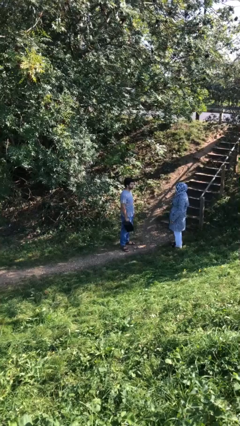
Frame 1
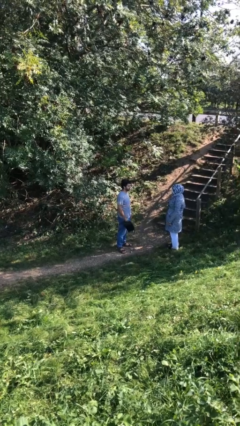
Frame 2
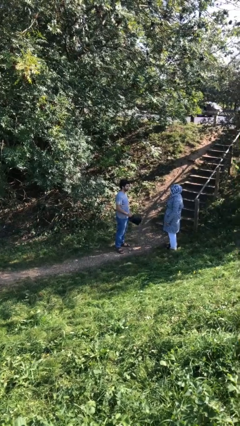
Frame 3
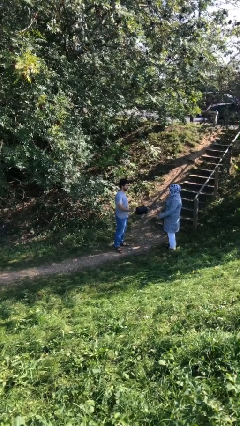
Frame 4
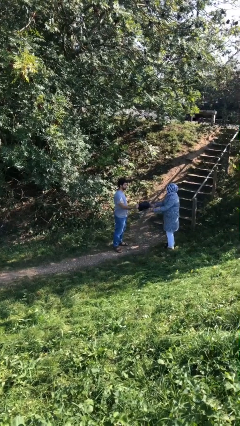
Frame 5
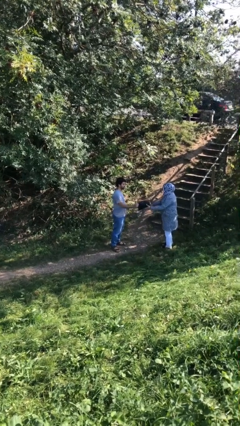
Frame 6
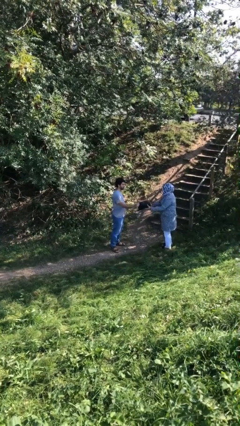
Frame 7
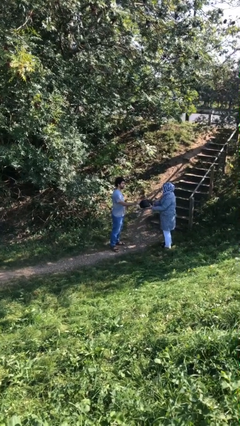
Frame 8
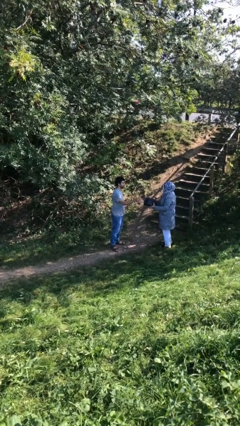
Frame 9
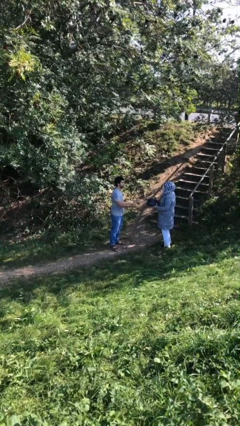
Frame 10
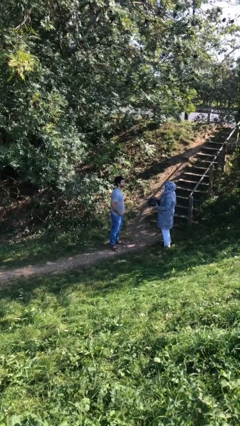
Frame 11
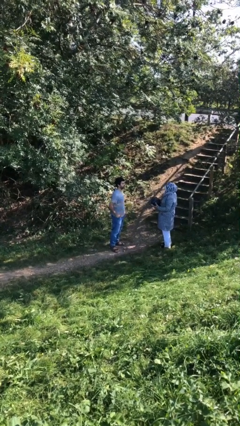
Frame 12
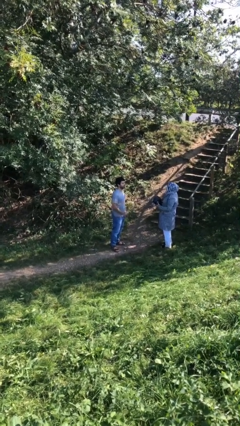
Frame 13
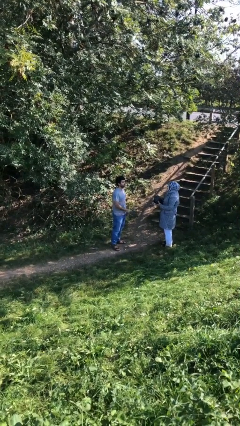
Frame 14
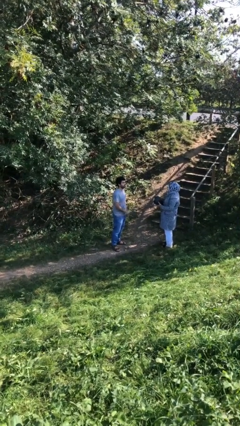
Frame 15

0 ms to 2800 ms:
person transfers object to person

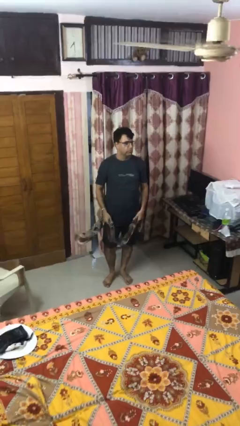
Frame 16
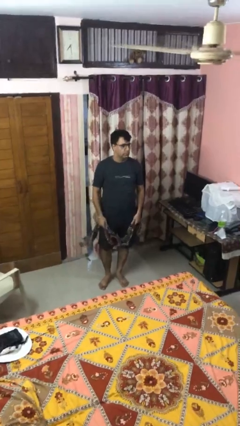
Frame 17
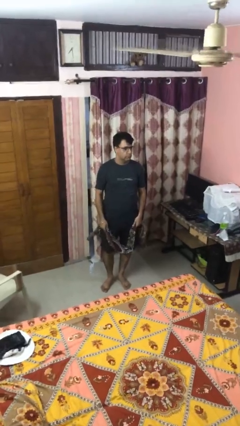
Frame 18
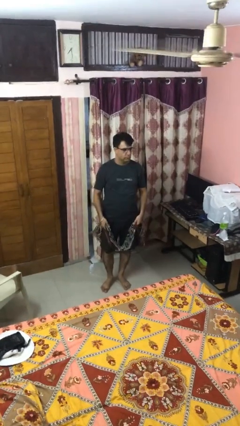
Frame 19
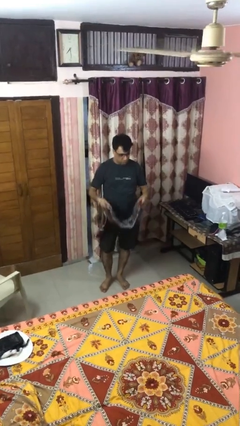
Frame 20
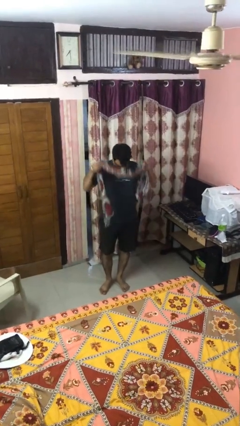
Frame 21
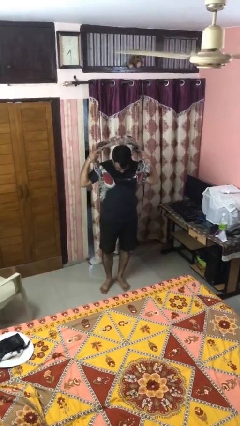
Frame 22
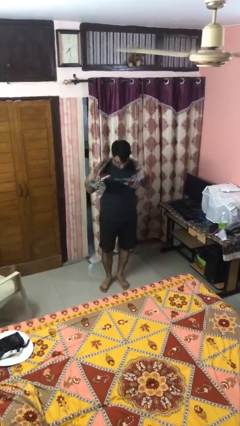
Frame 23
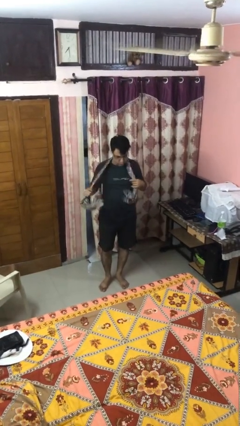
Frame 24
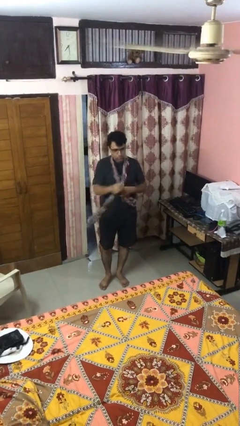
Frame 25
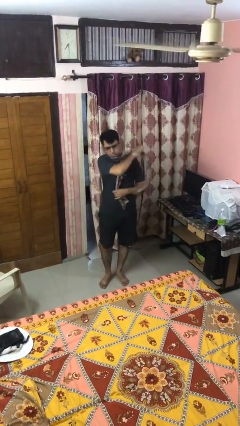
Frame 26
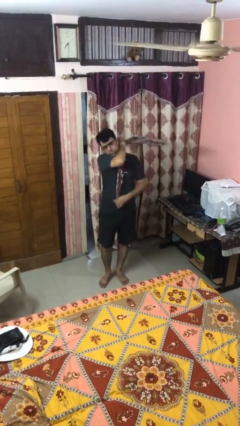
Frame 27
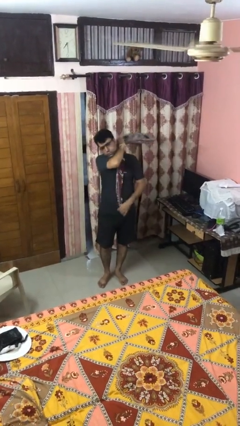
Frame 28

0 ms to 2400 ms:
person puts on scarf

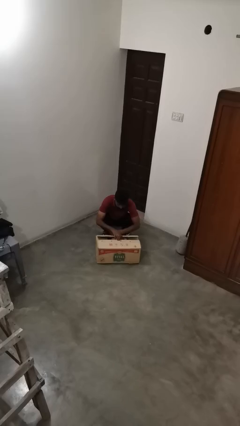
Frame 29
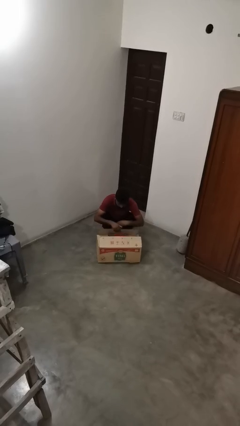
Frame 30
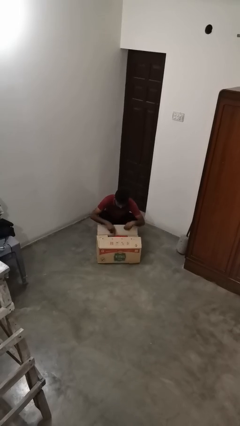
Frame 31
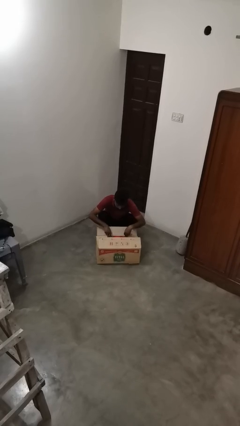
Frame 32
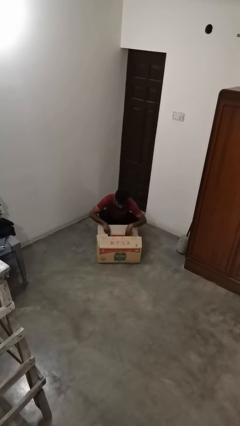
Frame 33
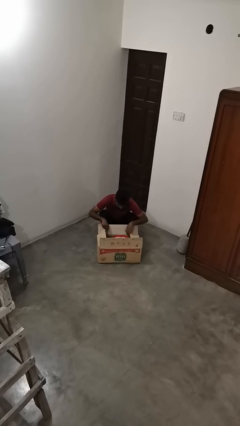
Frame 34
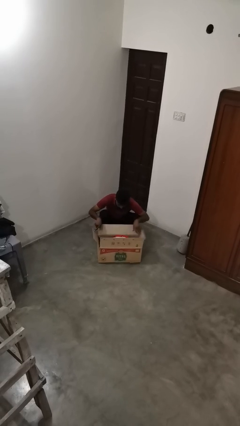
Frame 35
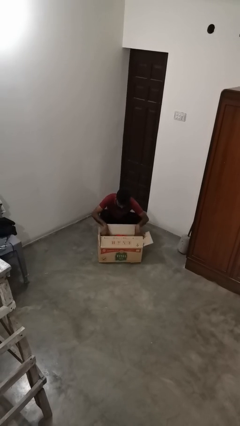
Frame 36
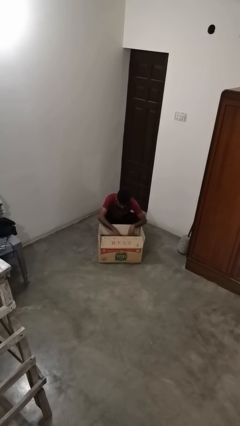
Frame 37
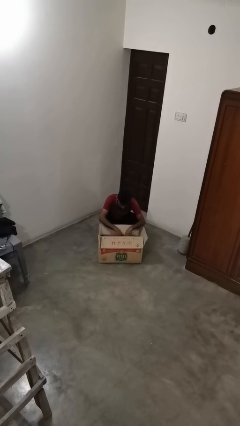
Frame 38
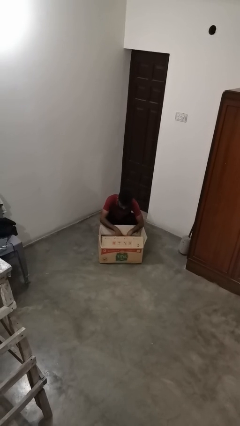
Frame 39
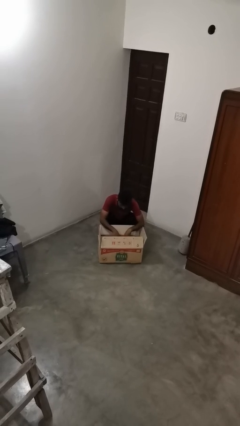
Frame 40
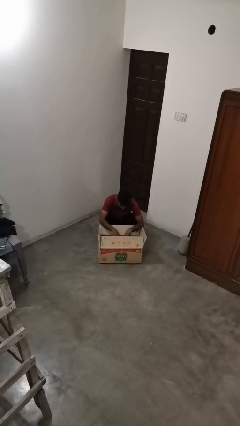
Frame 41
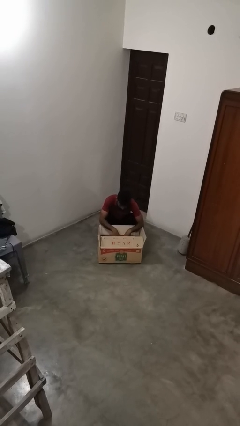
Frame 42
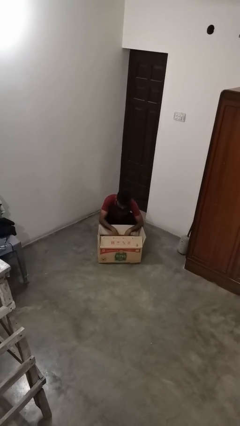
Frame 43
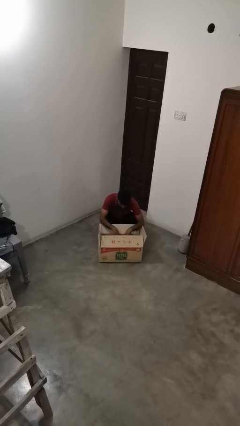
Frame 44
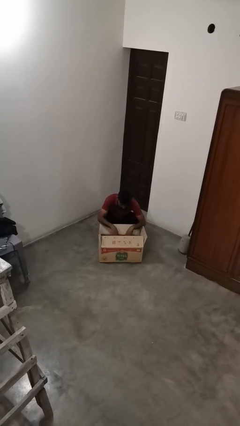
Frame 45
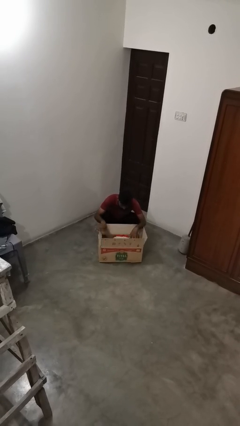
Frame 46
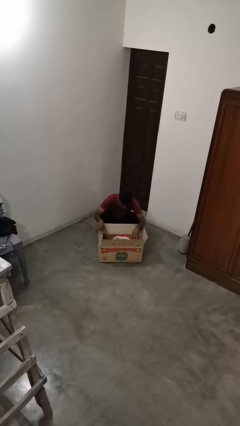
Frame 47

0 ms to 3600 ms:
person searches in box

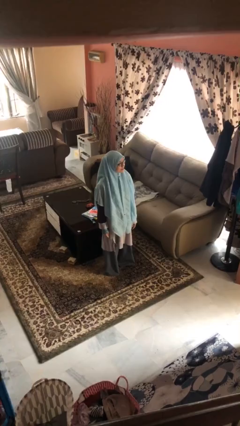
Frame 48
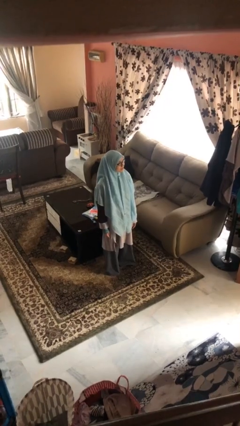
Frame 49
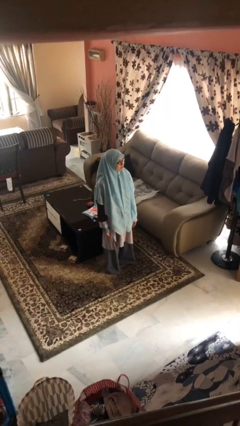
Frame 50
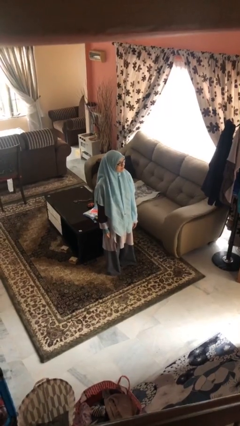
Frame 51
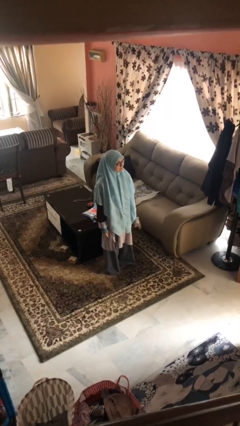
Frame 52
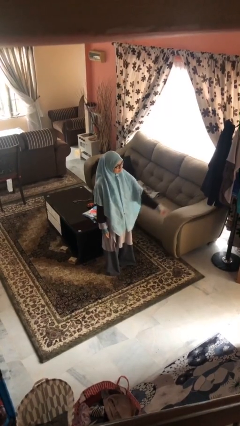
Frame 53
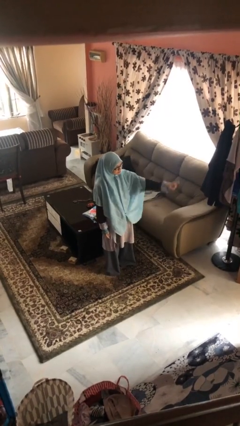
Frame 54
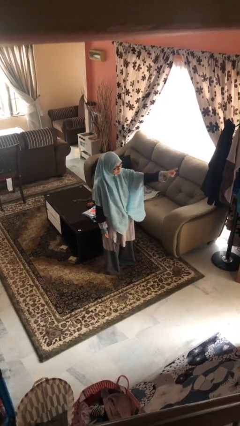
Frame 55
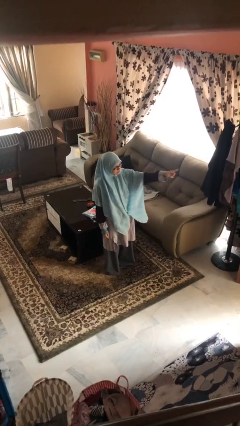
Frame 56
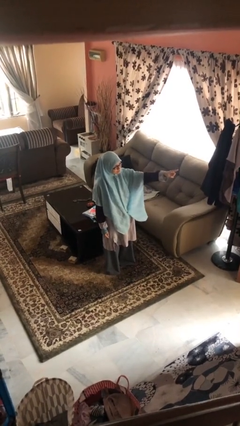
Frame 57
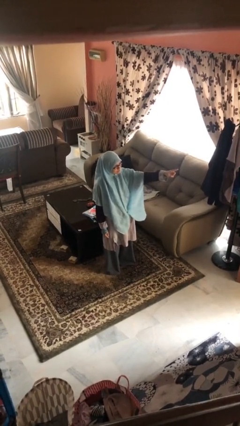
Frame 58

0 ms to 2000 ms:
person points at person

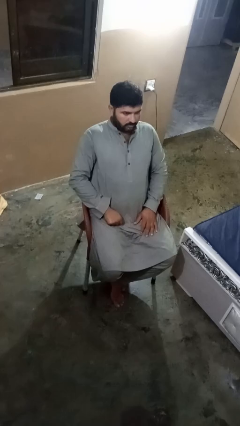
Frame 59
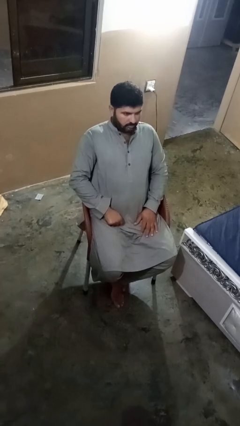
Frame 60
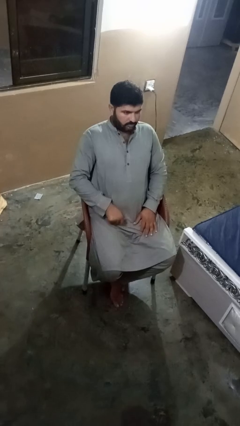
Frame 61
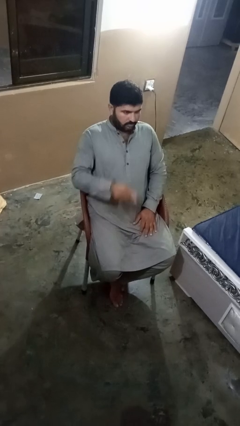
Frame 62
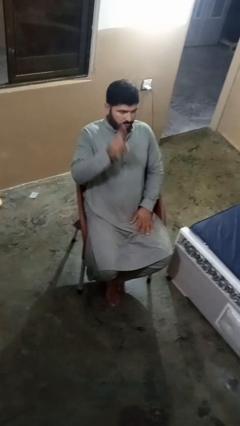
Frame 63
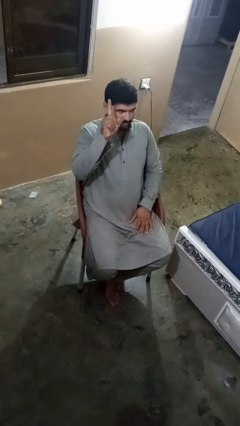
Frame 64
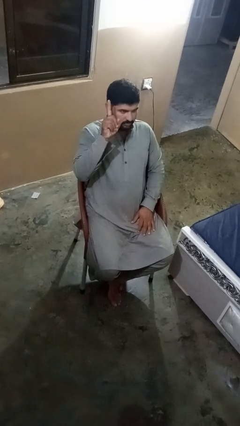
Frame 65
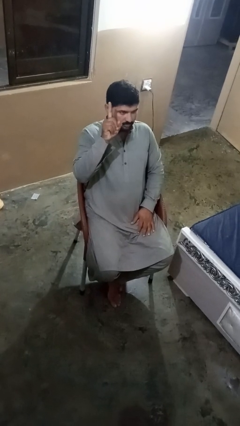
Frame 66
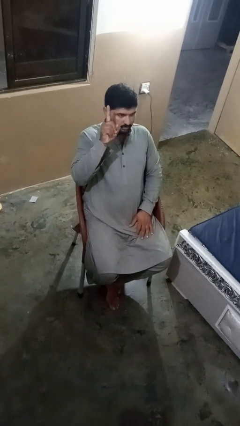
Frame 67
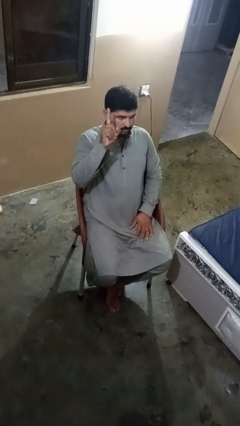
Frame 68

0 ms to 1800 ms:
person gestures number one

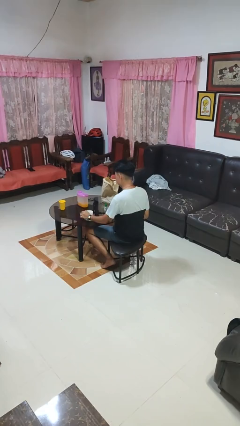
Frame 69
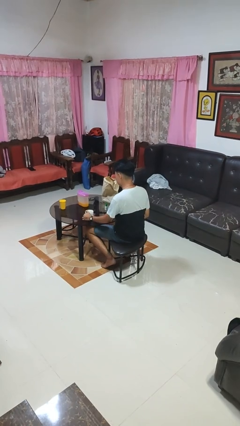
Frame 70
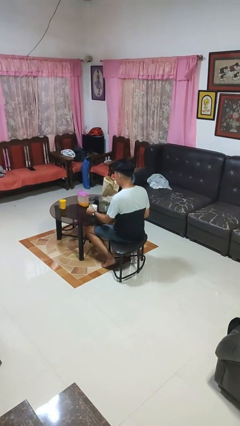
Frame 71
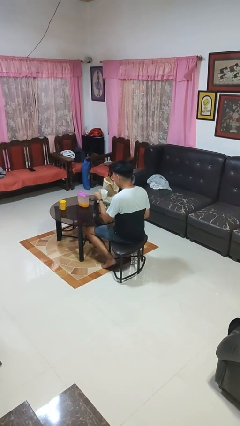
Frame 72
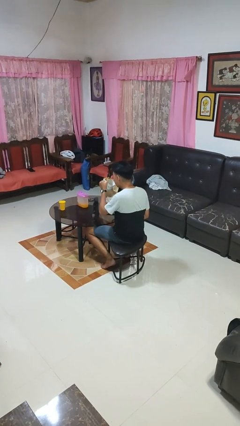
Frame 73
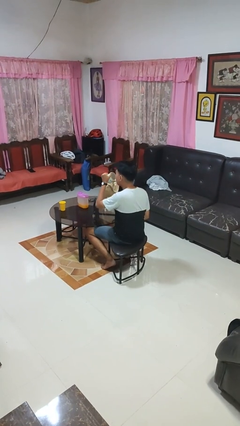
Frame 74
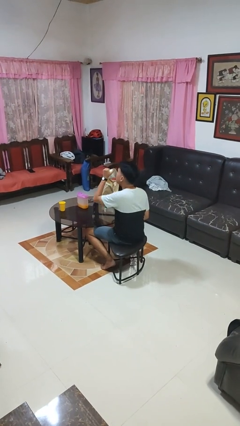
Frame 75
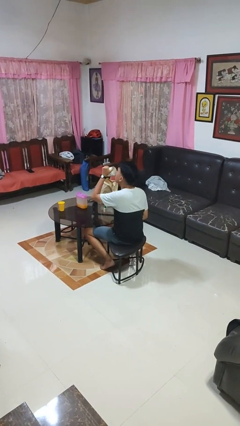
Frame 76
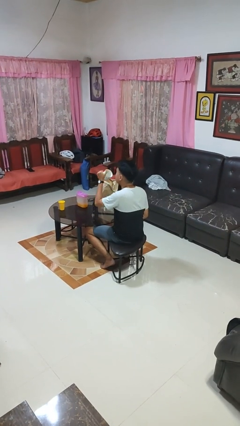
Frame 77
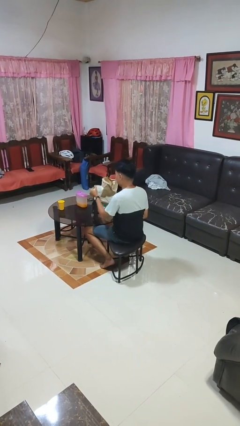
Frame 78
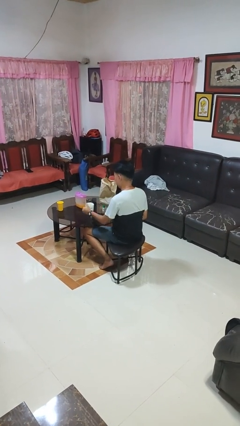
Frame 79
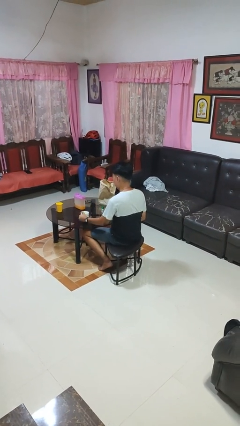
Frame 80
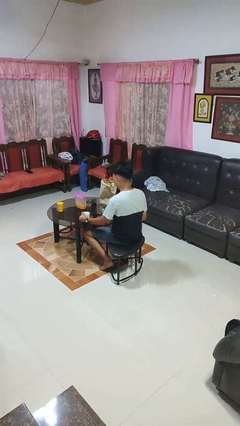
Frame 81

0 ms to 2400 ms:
person drinks from mug

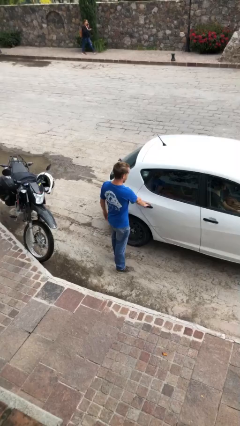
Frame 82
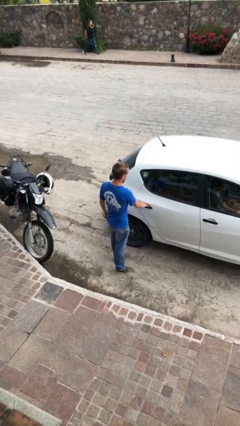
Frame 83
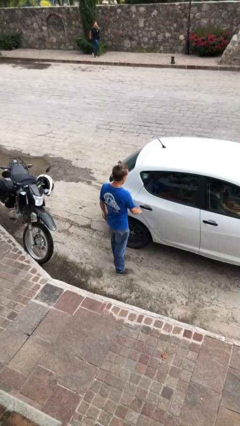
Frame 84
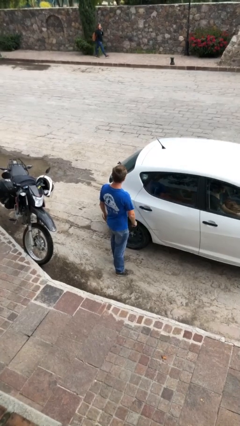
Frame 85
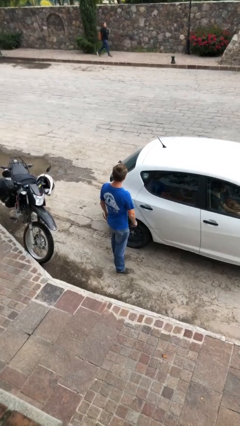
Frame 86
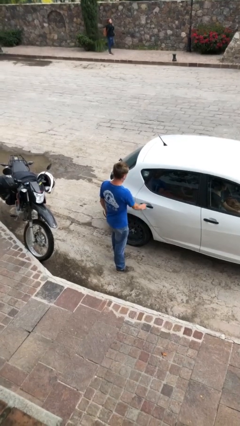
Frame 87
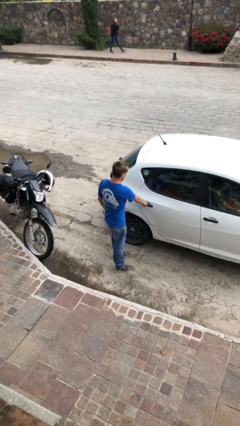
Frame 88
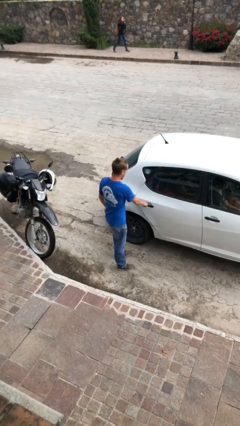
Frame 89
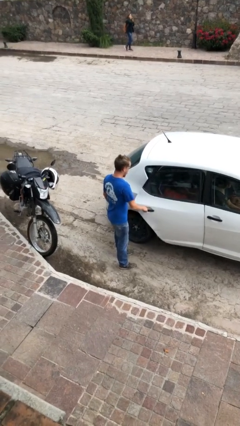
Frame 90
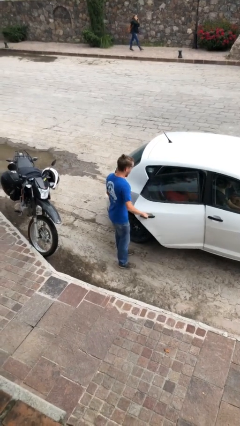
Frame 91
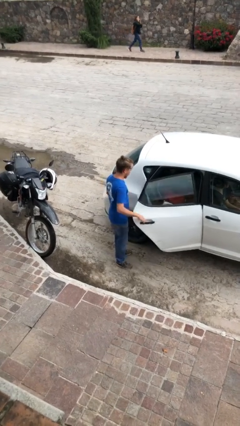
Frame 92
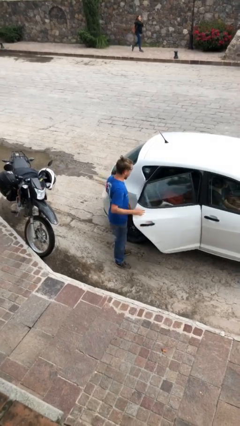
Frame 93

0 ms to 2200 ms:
person opens car door
